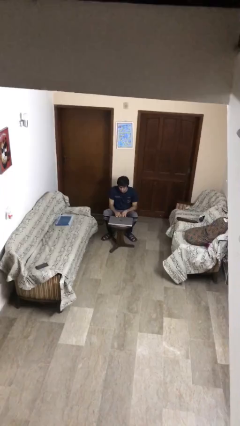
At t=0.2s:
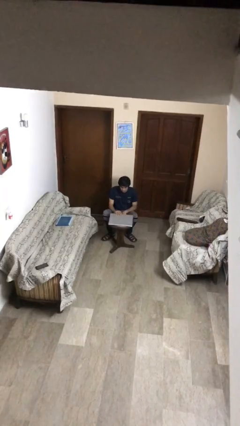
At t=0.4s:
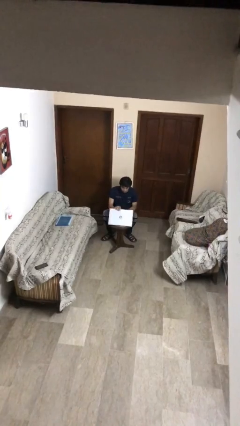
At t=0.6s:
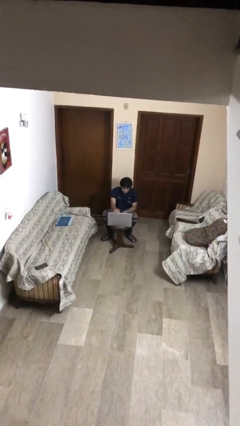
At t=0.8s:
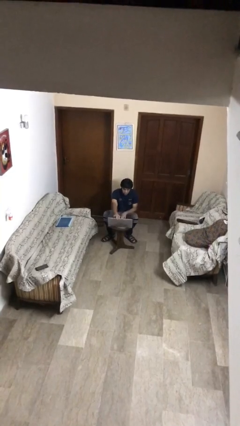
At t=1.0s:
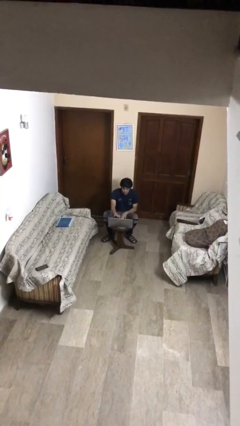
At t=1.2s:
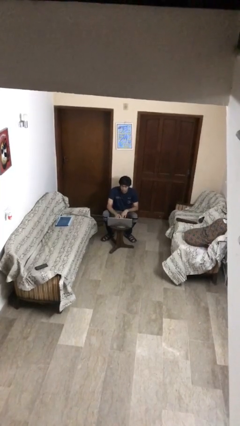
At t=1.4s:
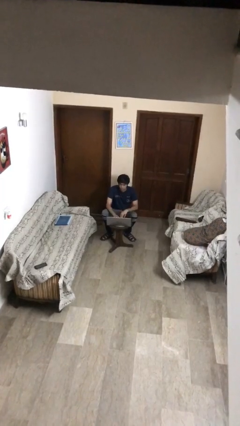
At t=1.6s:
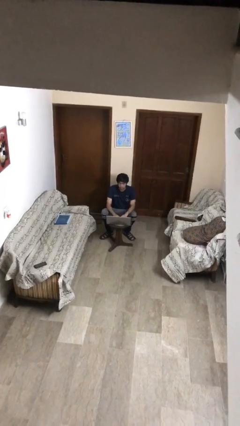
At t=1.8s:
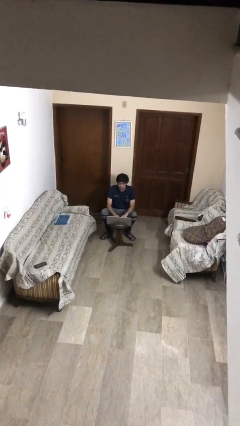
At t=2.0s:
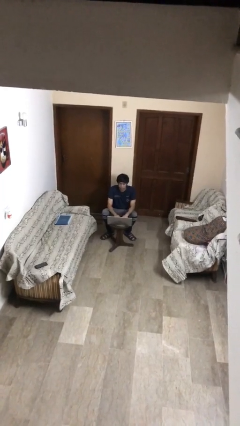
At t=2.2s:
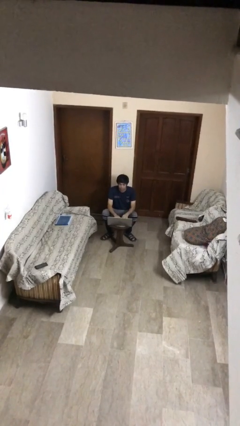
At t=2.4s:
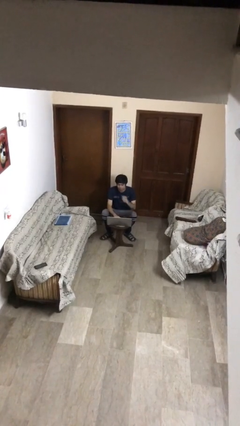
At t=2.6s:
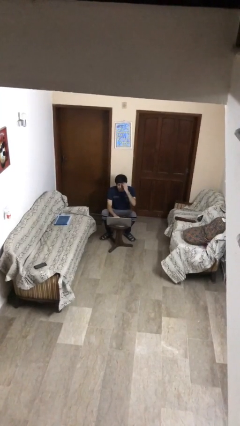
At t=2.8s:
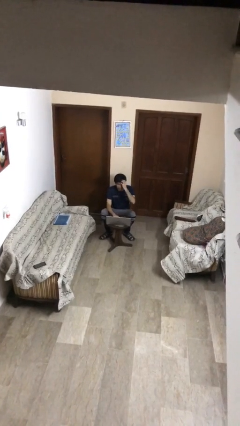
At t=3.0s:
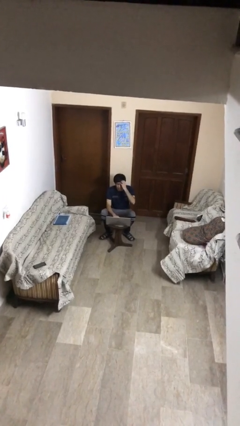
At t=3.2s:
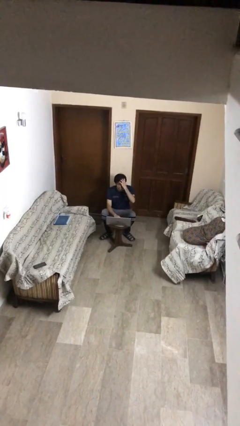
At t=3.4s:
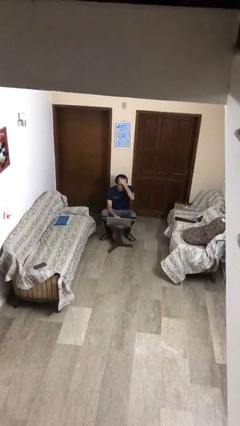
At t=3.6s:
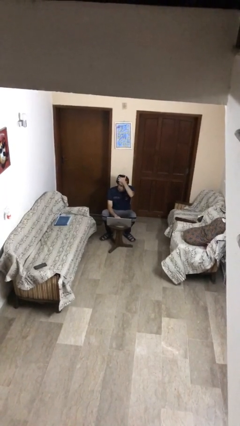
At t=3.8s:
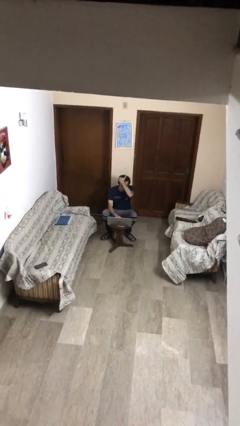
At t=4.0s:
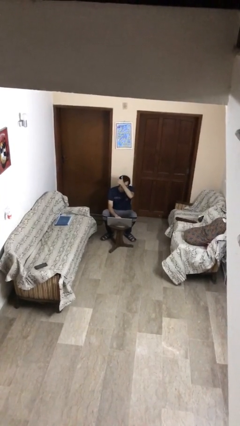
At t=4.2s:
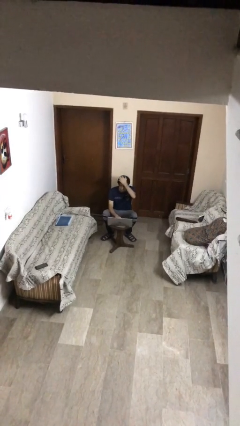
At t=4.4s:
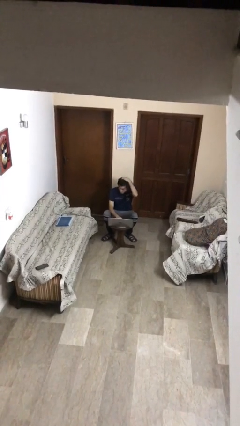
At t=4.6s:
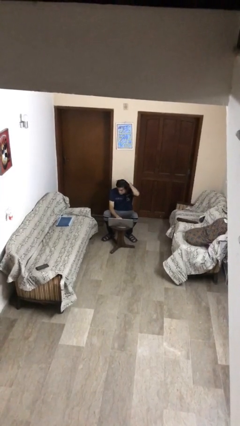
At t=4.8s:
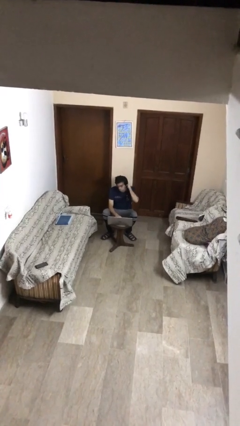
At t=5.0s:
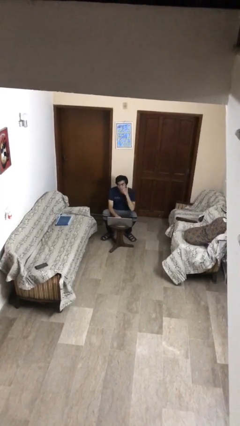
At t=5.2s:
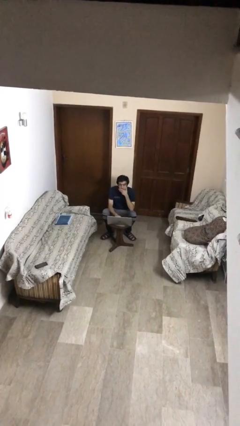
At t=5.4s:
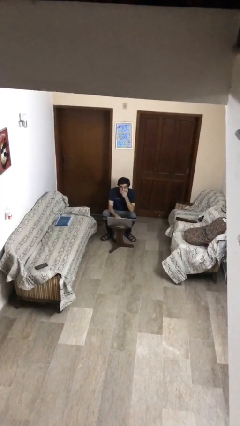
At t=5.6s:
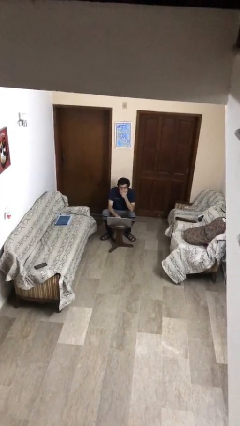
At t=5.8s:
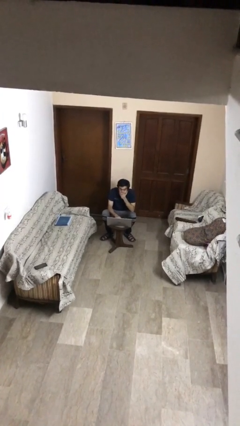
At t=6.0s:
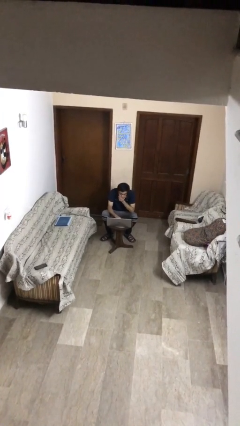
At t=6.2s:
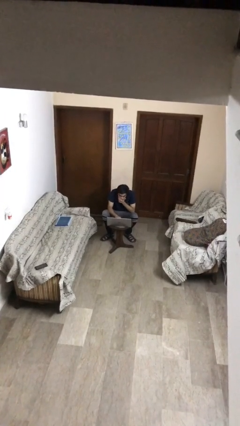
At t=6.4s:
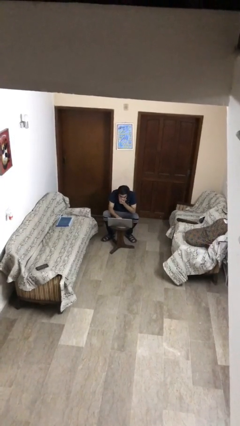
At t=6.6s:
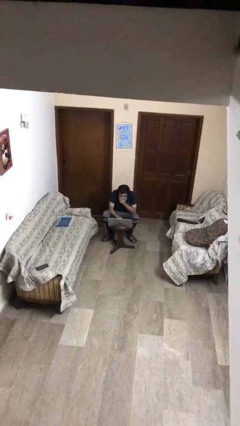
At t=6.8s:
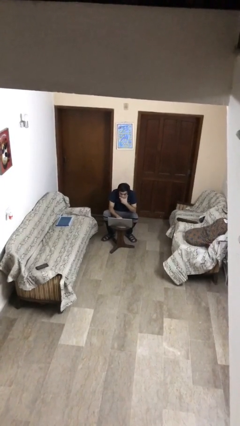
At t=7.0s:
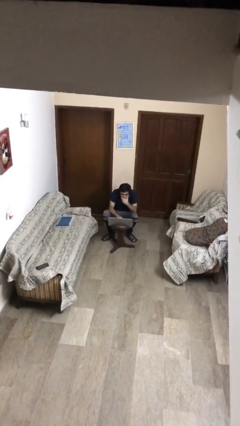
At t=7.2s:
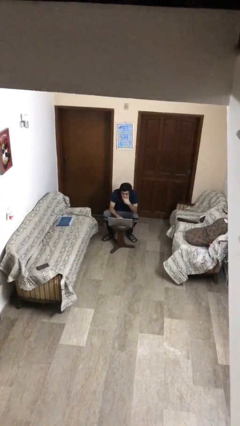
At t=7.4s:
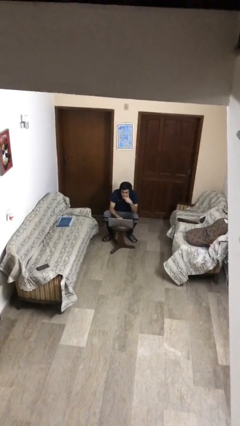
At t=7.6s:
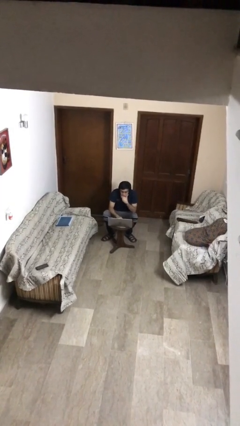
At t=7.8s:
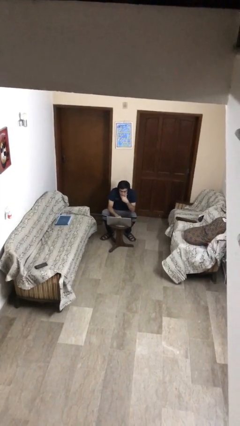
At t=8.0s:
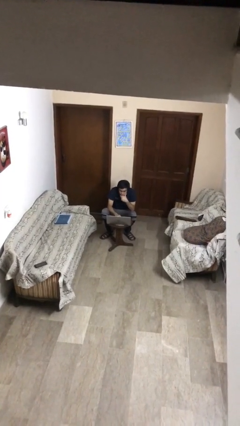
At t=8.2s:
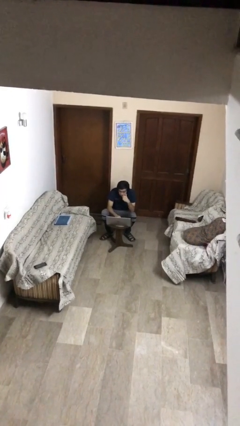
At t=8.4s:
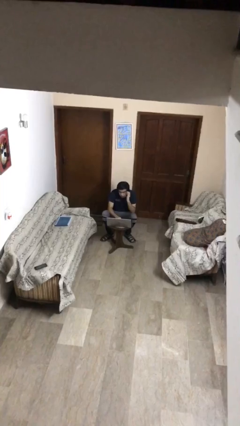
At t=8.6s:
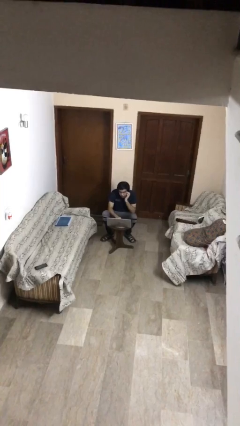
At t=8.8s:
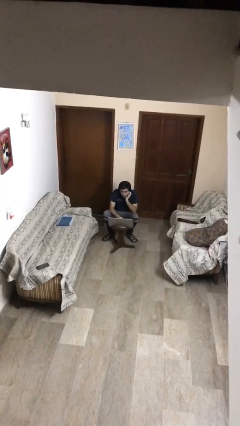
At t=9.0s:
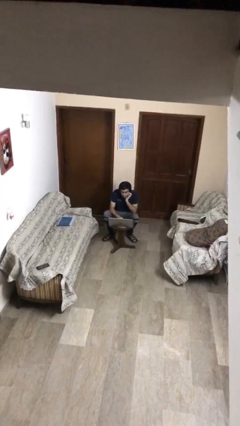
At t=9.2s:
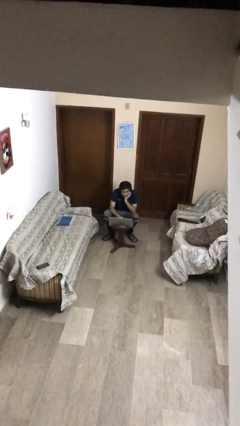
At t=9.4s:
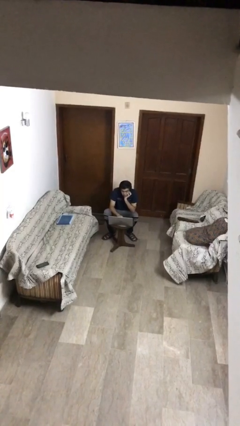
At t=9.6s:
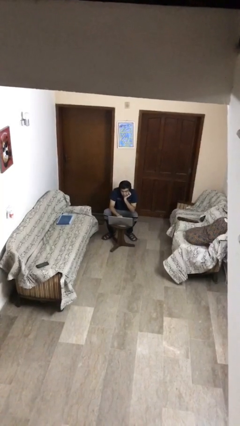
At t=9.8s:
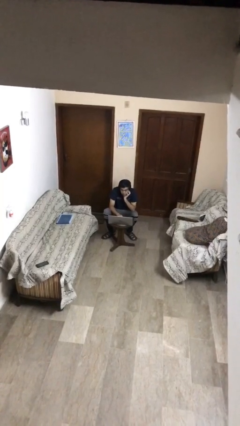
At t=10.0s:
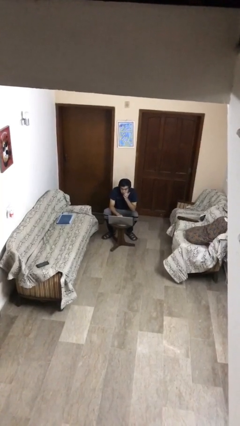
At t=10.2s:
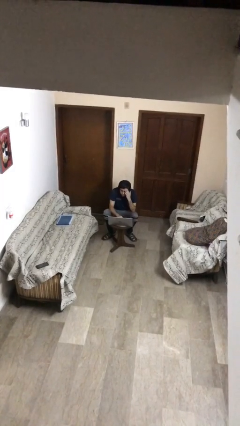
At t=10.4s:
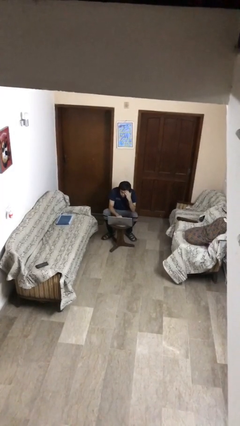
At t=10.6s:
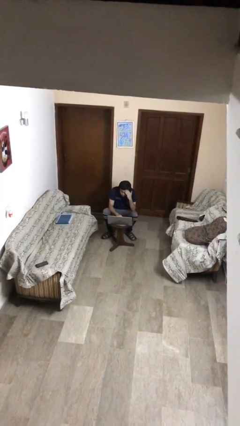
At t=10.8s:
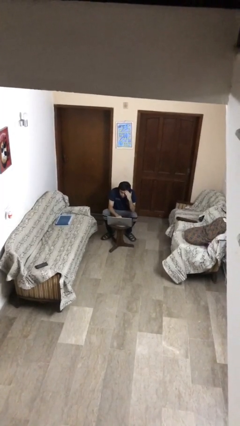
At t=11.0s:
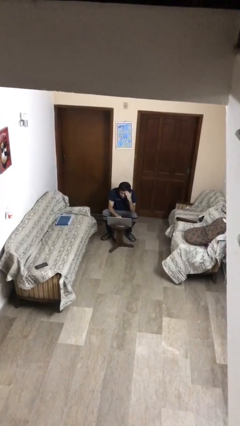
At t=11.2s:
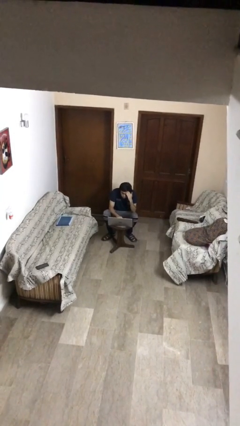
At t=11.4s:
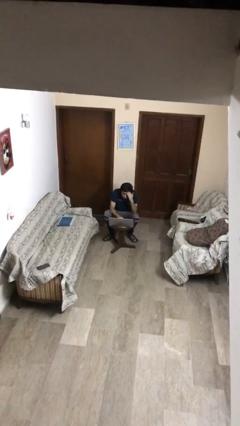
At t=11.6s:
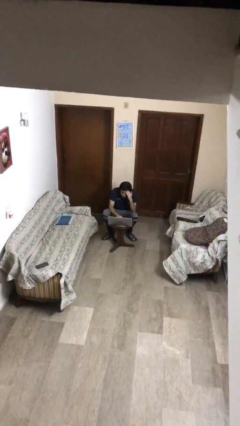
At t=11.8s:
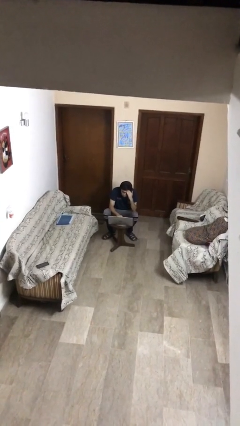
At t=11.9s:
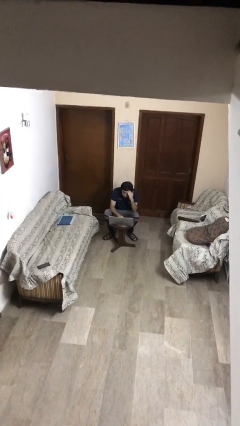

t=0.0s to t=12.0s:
person interacts with laptop

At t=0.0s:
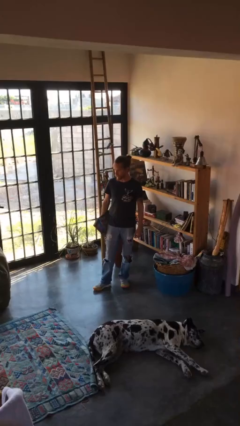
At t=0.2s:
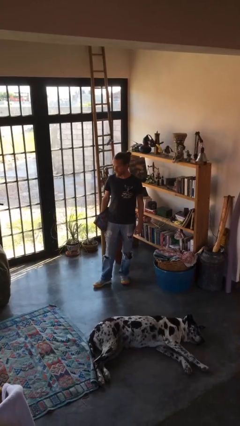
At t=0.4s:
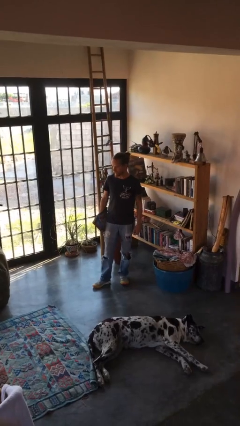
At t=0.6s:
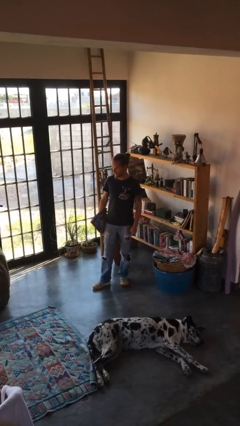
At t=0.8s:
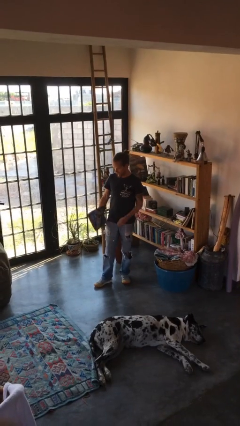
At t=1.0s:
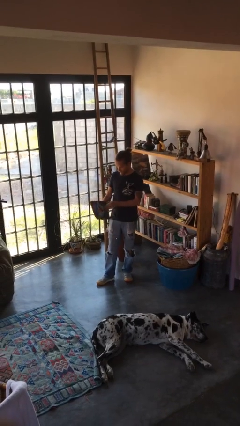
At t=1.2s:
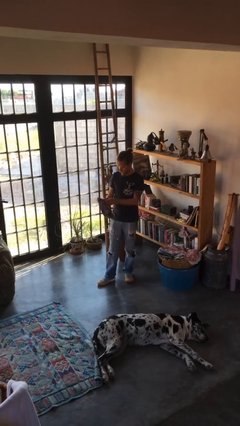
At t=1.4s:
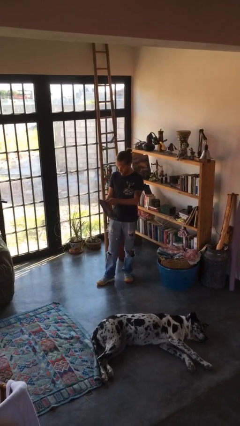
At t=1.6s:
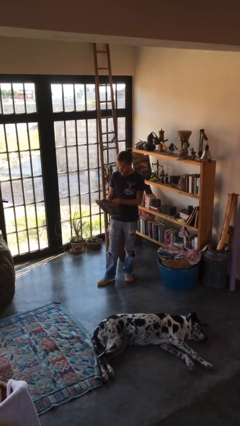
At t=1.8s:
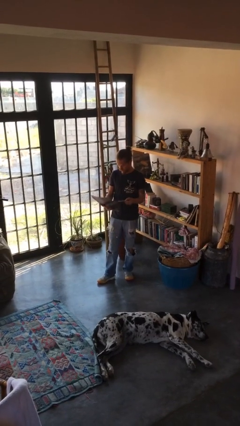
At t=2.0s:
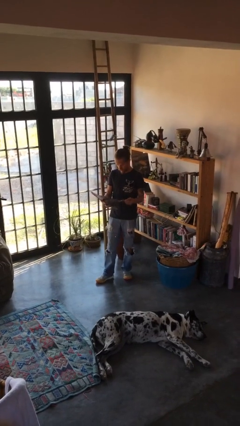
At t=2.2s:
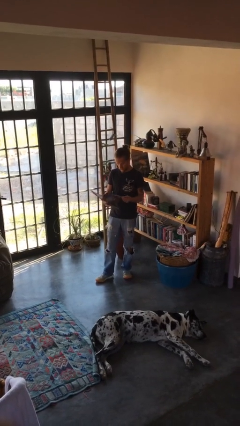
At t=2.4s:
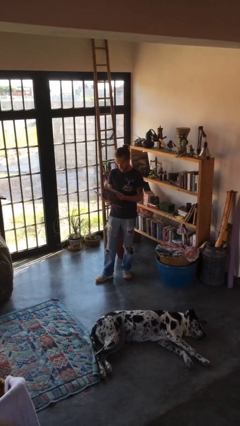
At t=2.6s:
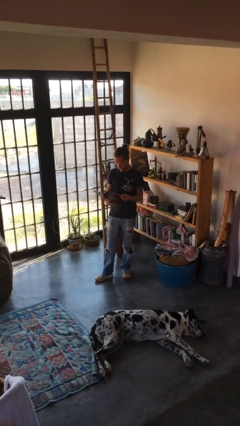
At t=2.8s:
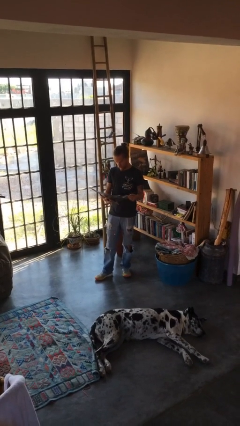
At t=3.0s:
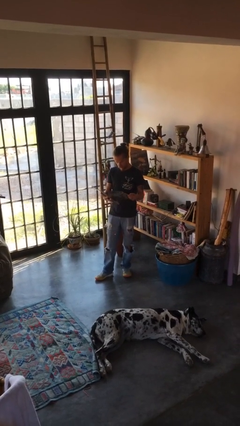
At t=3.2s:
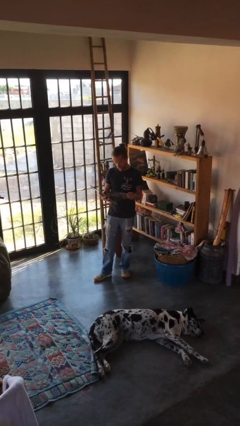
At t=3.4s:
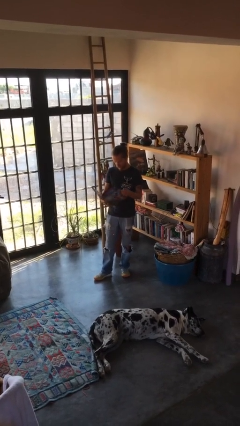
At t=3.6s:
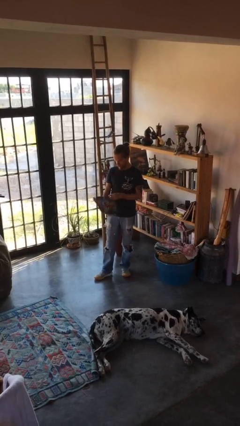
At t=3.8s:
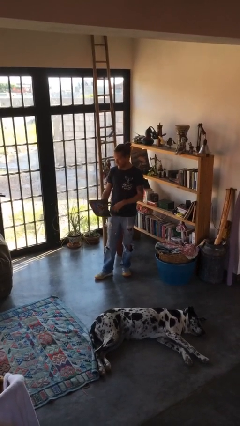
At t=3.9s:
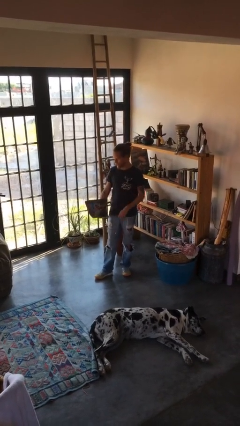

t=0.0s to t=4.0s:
person reads magazine

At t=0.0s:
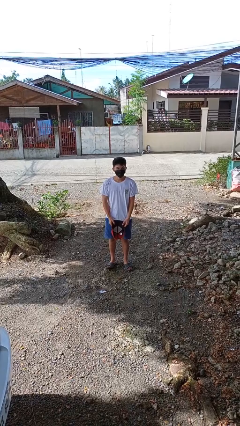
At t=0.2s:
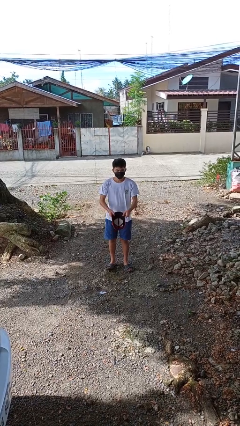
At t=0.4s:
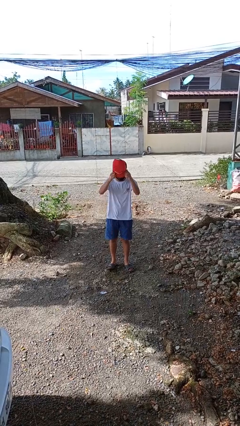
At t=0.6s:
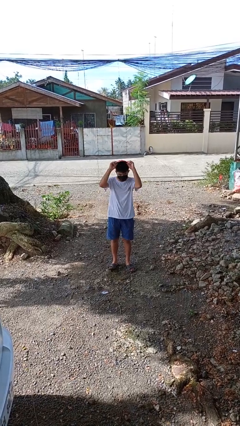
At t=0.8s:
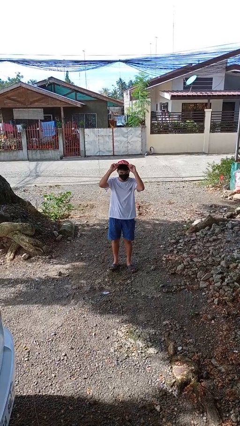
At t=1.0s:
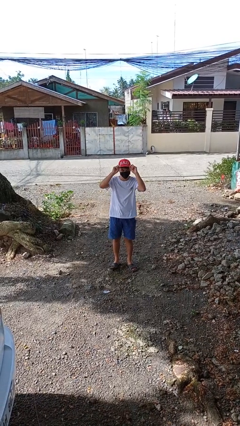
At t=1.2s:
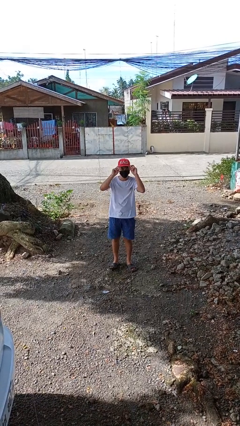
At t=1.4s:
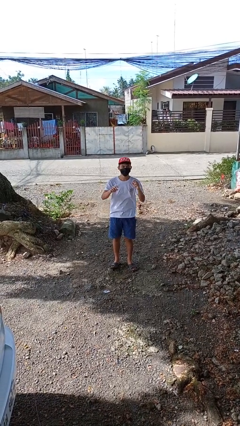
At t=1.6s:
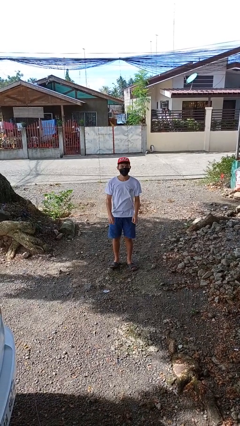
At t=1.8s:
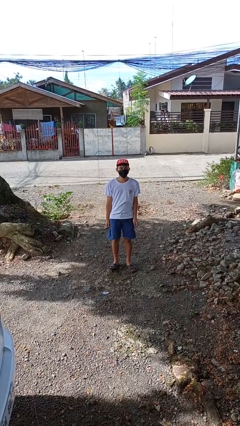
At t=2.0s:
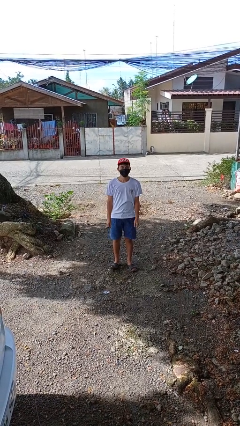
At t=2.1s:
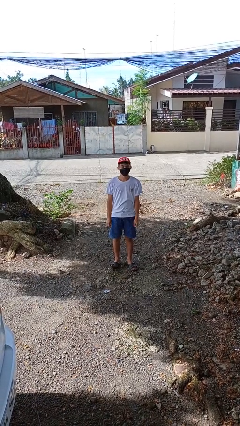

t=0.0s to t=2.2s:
person puts on hat
